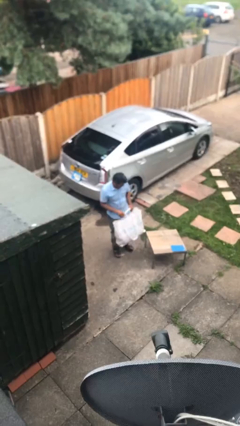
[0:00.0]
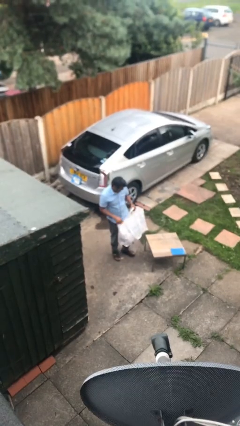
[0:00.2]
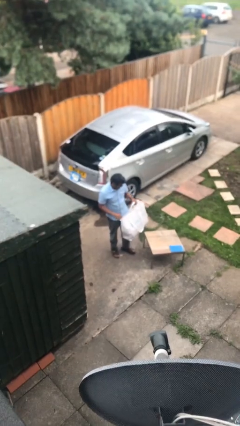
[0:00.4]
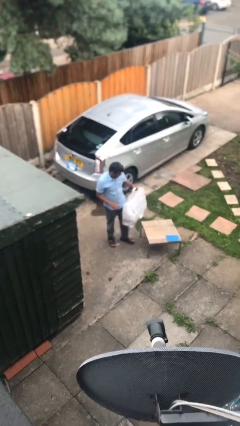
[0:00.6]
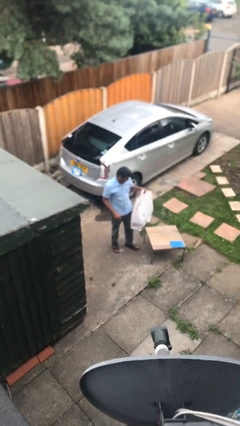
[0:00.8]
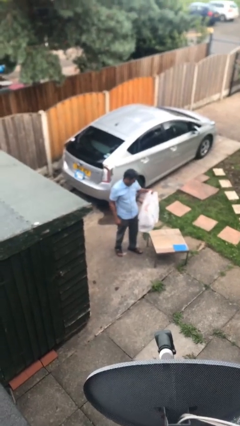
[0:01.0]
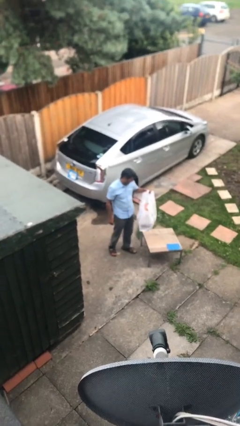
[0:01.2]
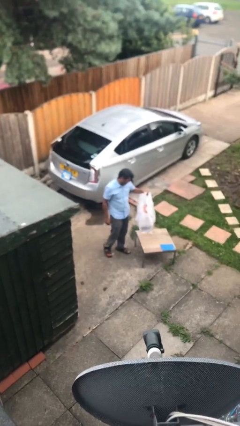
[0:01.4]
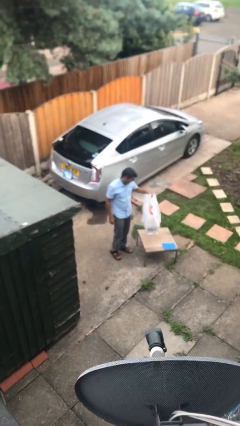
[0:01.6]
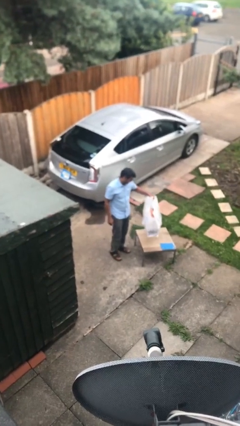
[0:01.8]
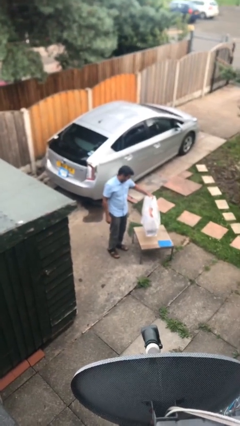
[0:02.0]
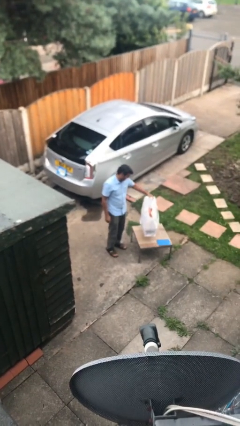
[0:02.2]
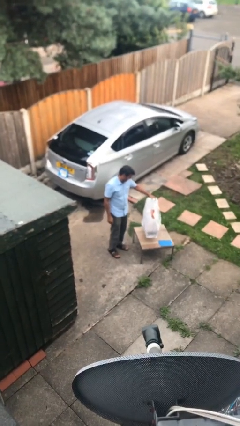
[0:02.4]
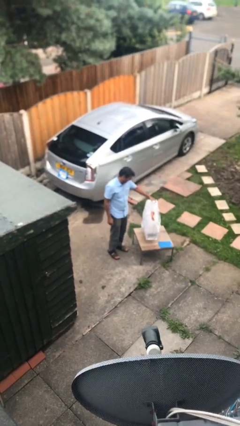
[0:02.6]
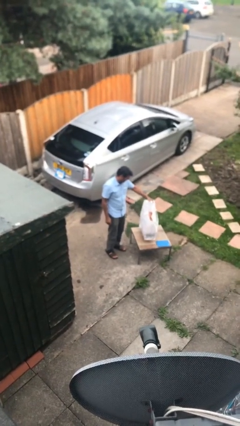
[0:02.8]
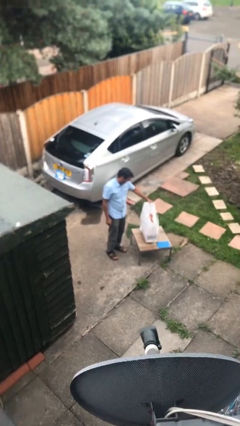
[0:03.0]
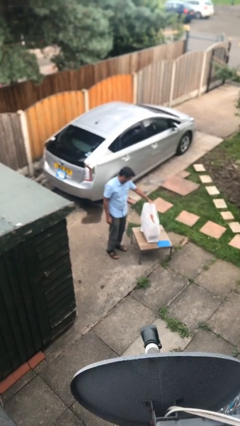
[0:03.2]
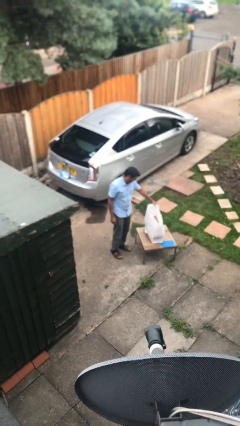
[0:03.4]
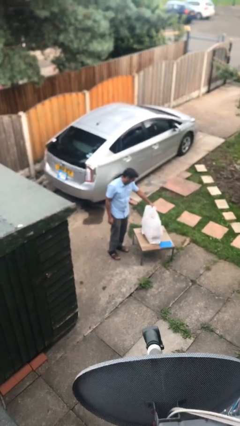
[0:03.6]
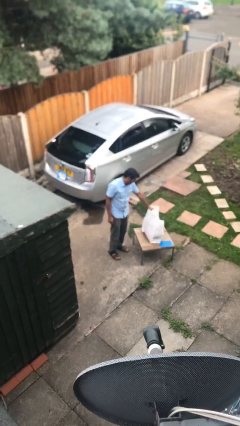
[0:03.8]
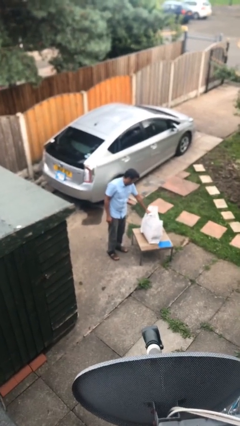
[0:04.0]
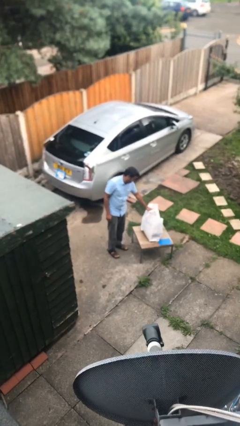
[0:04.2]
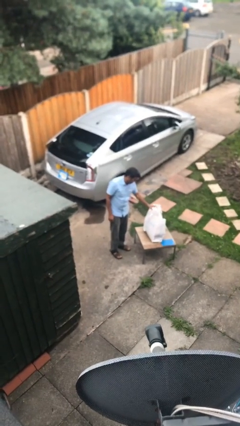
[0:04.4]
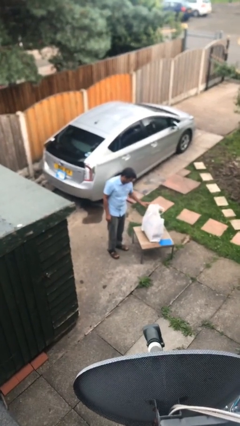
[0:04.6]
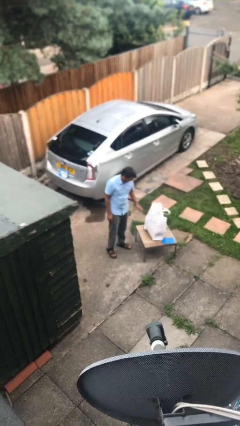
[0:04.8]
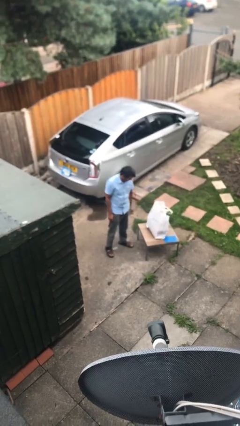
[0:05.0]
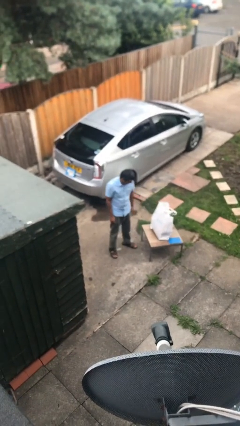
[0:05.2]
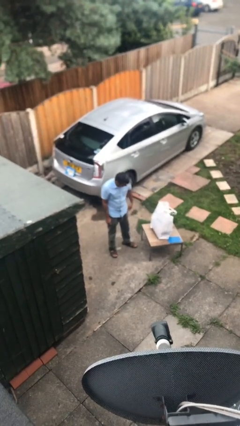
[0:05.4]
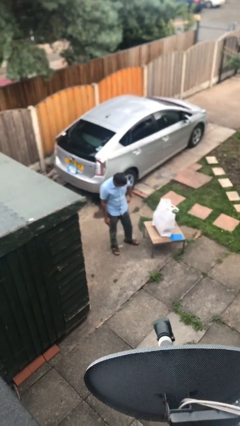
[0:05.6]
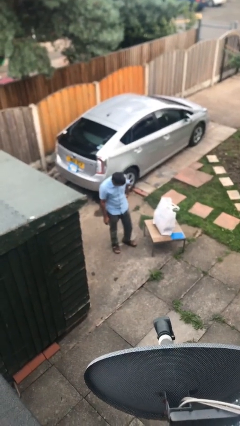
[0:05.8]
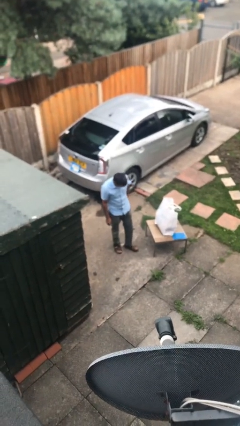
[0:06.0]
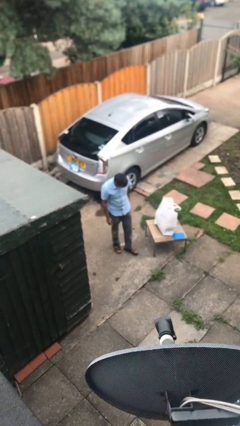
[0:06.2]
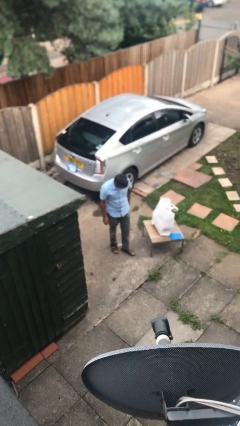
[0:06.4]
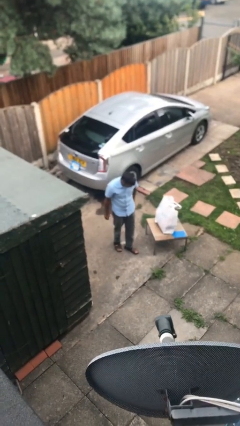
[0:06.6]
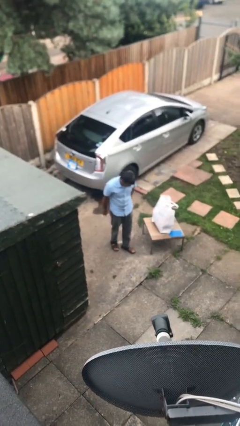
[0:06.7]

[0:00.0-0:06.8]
person puts down object on table

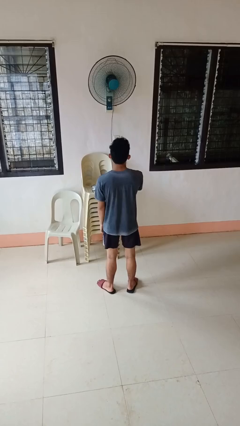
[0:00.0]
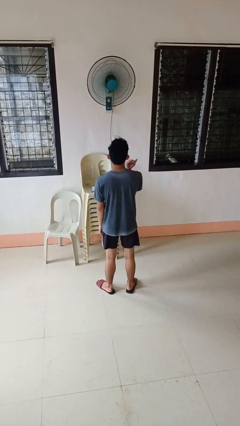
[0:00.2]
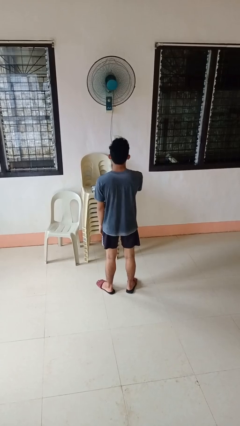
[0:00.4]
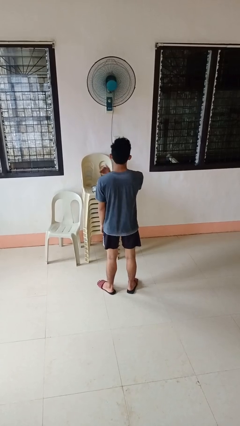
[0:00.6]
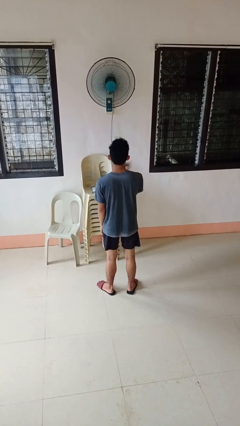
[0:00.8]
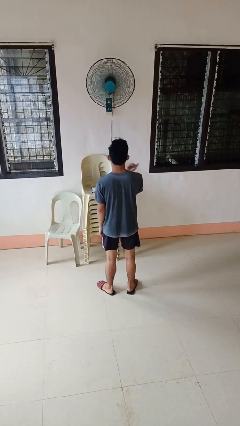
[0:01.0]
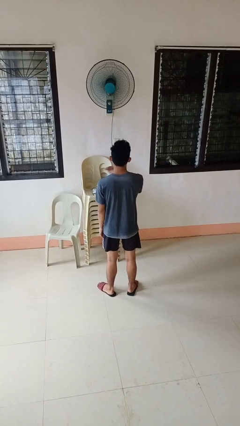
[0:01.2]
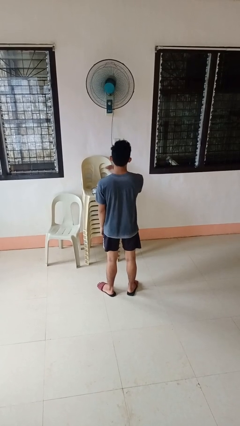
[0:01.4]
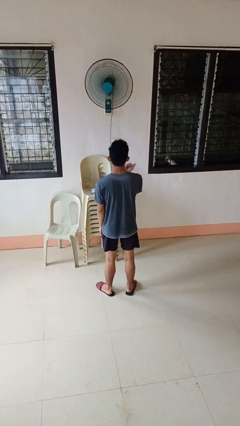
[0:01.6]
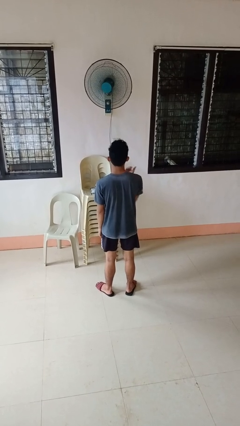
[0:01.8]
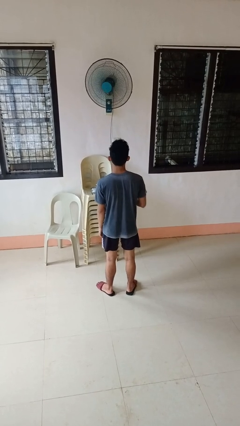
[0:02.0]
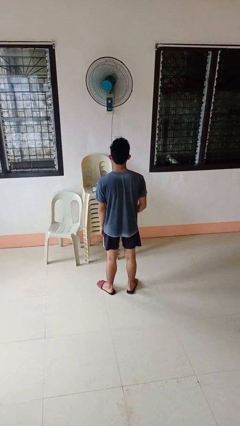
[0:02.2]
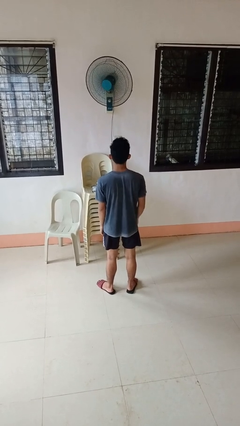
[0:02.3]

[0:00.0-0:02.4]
person gestures cut

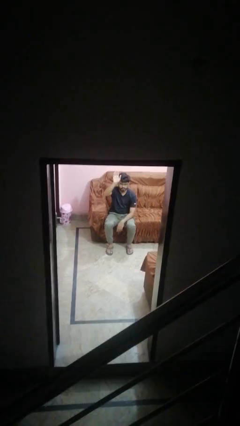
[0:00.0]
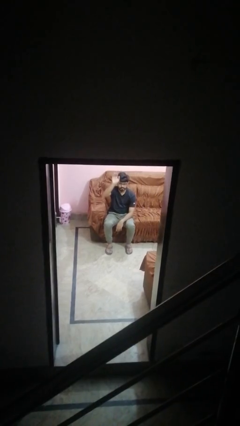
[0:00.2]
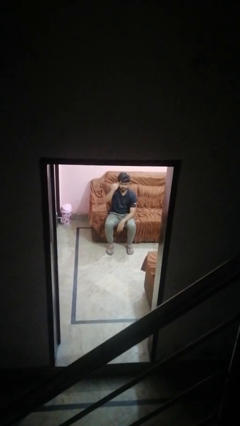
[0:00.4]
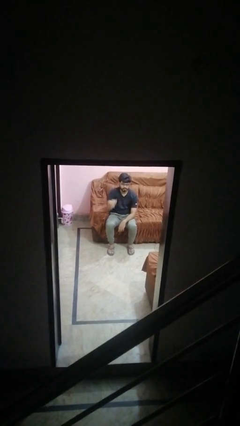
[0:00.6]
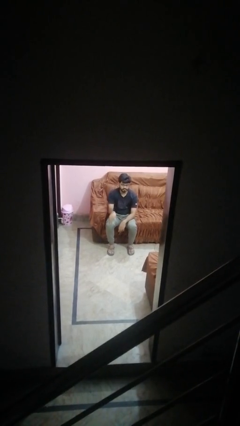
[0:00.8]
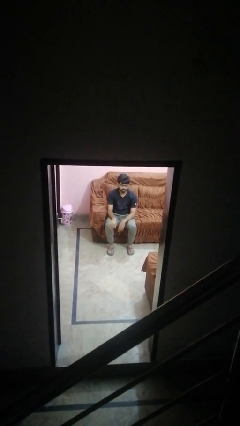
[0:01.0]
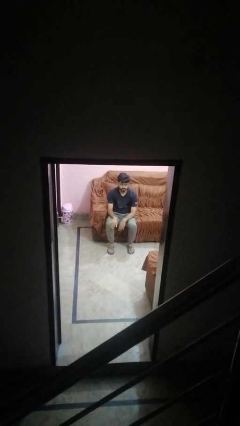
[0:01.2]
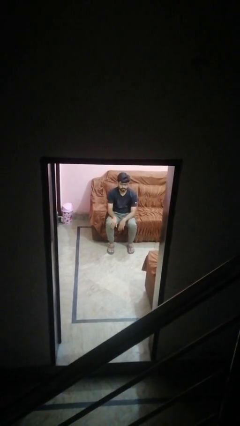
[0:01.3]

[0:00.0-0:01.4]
person gestures lower hand

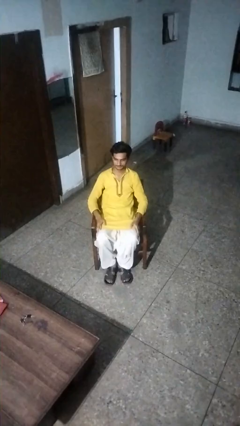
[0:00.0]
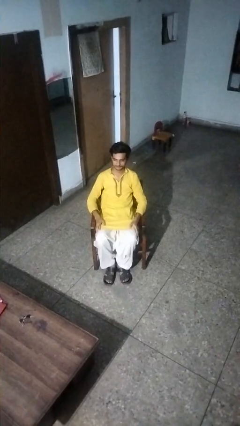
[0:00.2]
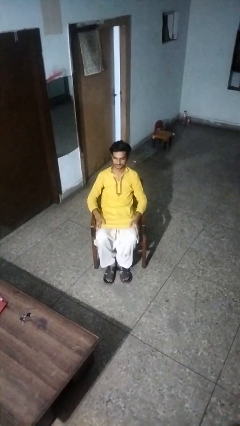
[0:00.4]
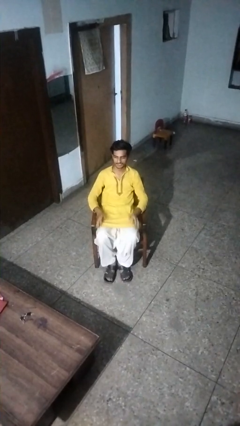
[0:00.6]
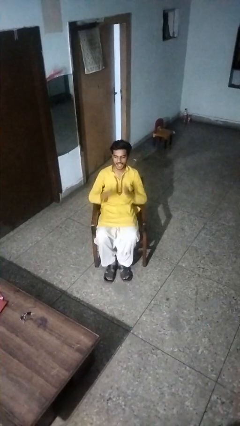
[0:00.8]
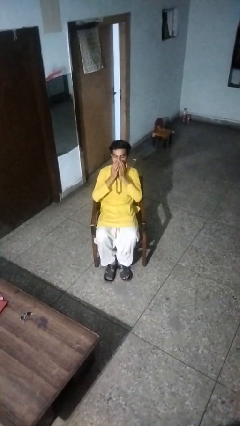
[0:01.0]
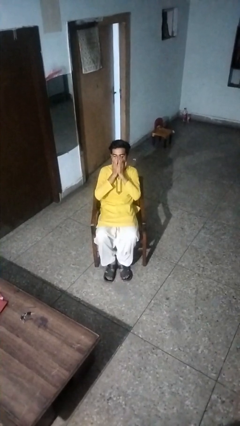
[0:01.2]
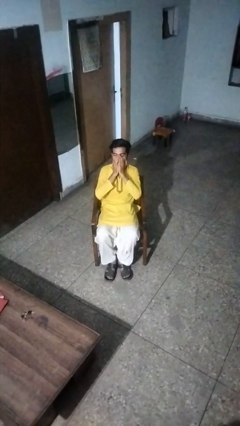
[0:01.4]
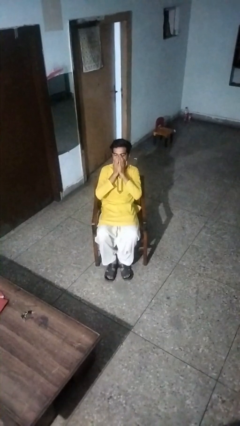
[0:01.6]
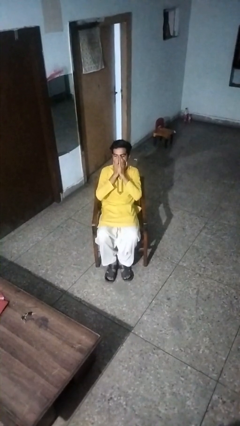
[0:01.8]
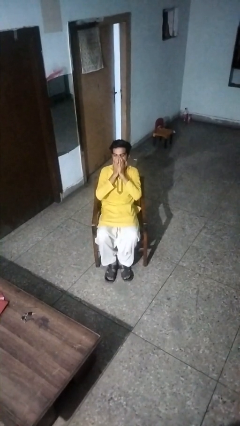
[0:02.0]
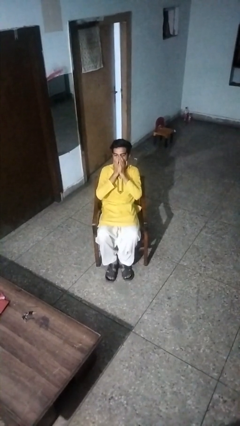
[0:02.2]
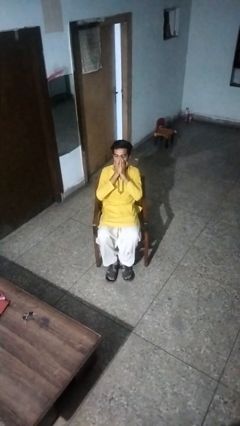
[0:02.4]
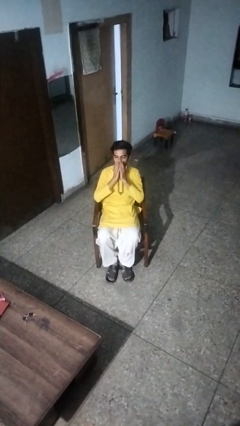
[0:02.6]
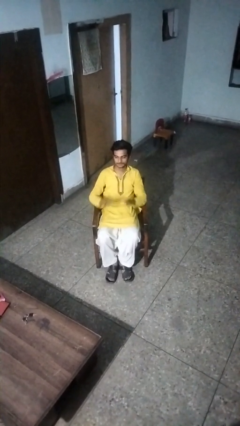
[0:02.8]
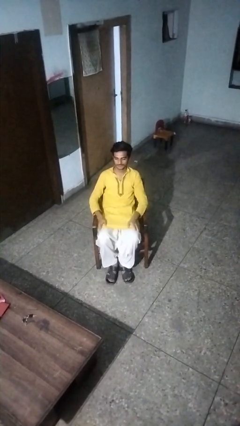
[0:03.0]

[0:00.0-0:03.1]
person yawns

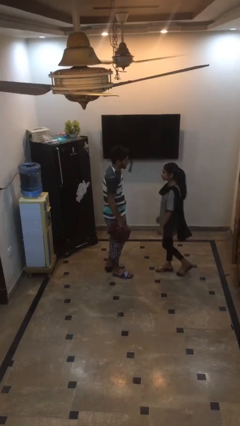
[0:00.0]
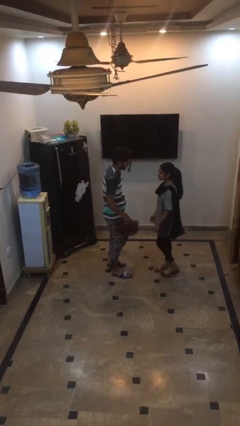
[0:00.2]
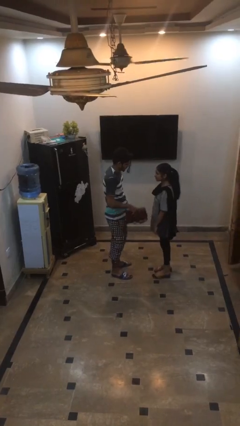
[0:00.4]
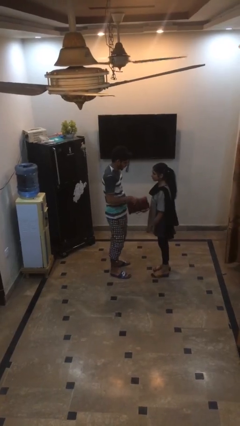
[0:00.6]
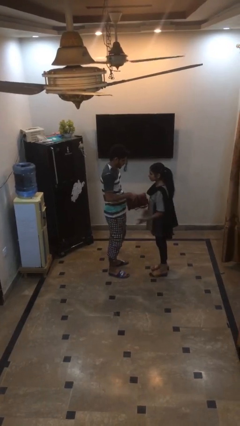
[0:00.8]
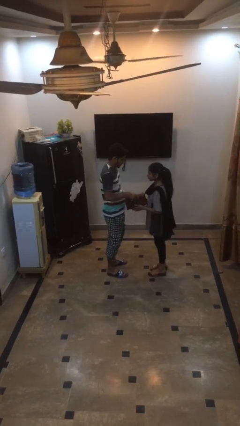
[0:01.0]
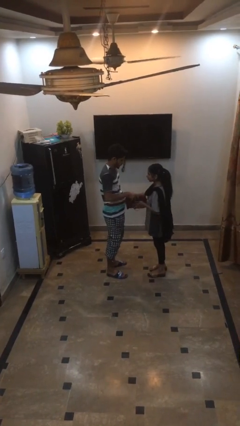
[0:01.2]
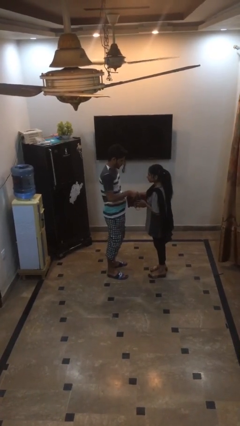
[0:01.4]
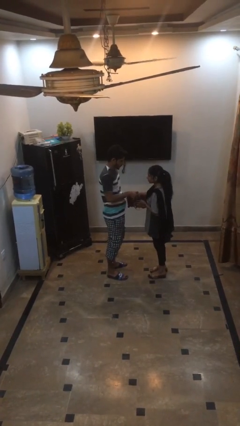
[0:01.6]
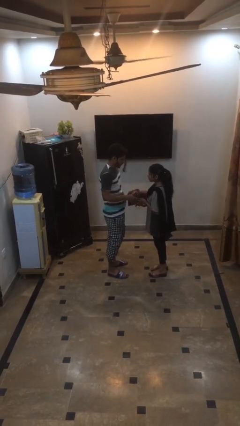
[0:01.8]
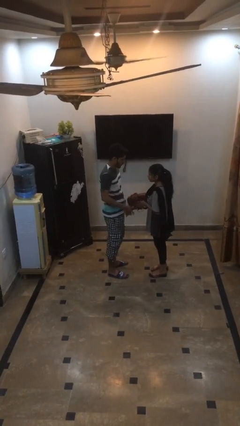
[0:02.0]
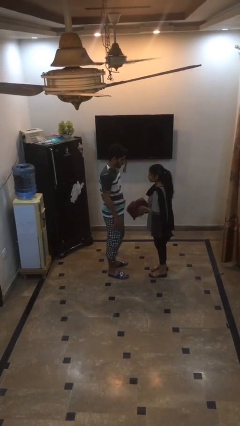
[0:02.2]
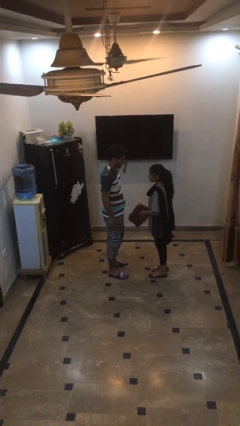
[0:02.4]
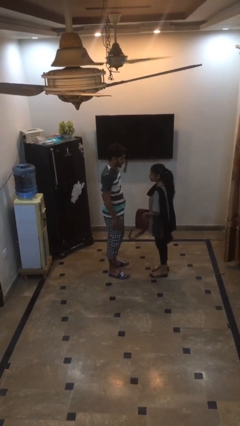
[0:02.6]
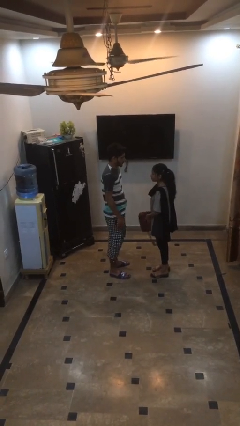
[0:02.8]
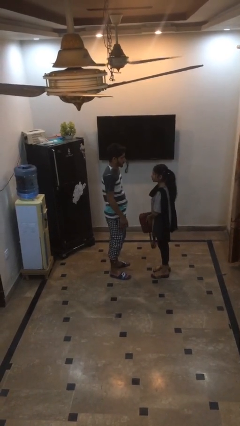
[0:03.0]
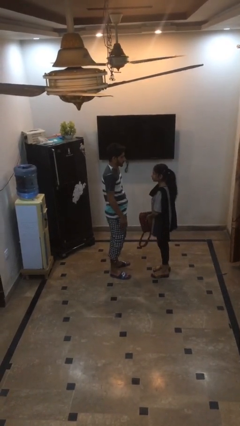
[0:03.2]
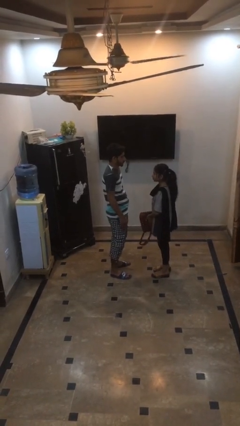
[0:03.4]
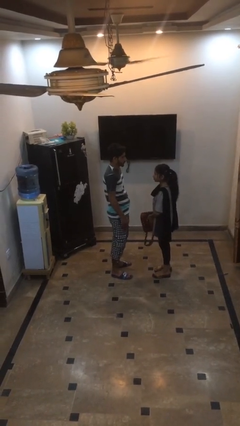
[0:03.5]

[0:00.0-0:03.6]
person transfers object to person

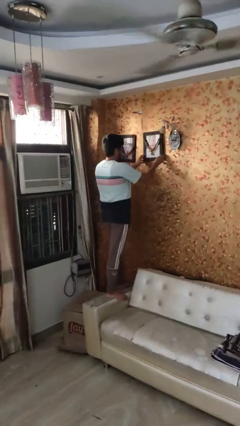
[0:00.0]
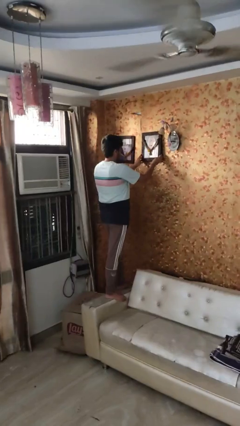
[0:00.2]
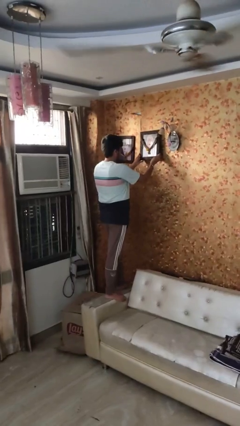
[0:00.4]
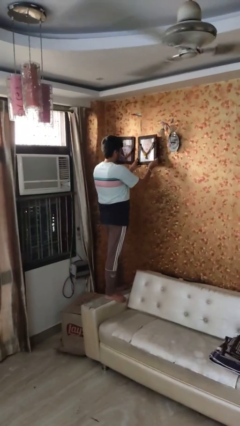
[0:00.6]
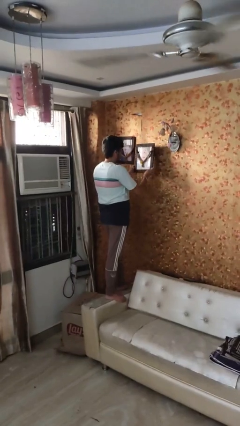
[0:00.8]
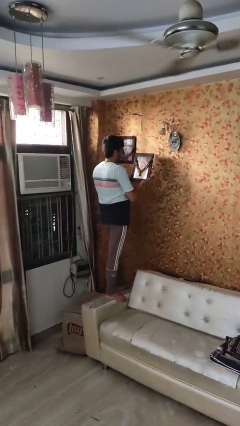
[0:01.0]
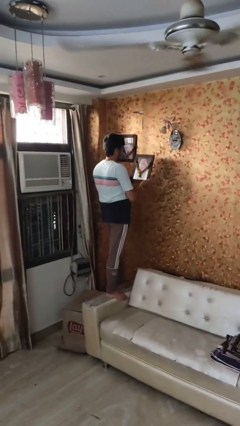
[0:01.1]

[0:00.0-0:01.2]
person takes down picture frame
